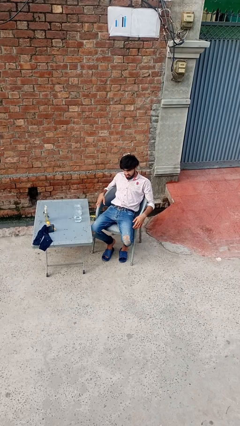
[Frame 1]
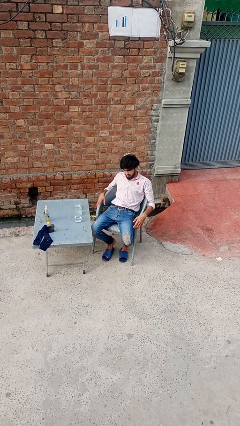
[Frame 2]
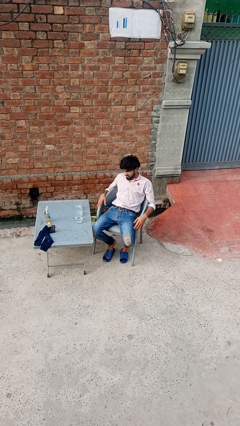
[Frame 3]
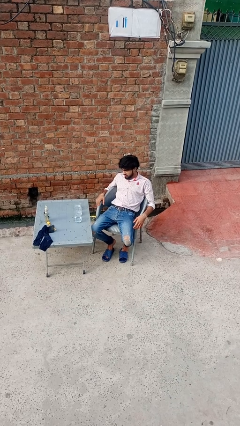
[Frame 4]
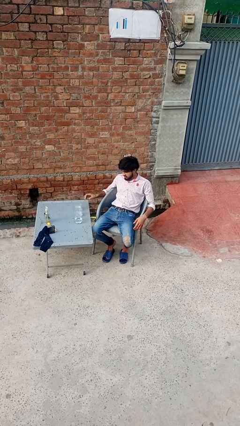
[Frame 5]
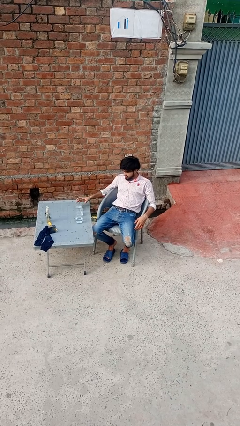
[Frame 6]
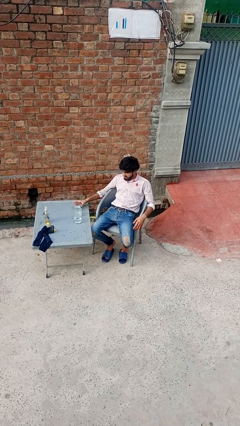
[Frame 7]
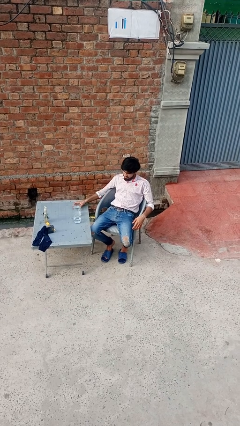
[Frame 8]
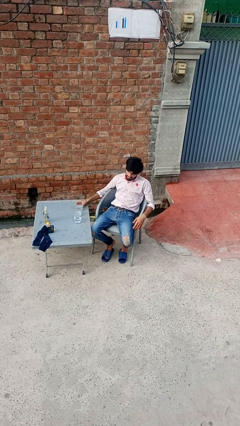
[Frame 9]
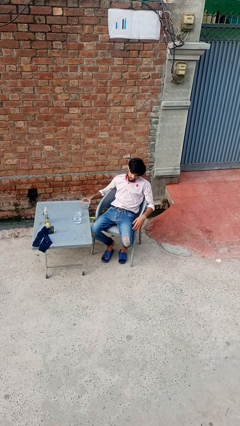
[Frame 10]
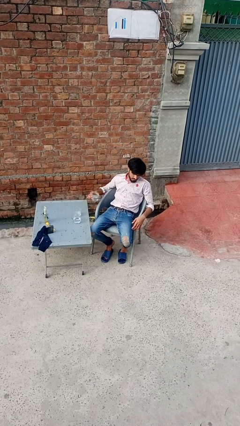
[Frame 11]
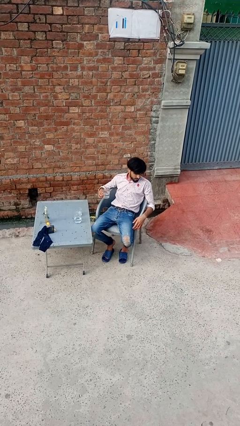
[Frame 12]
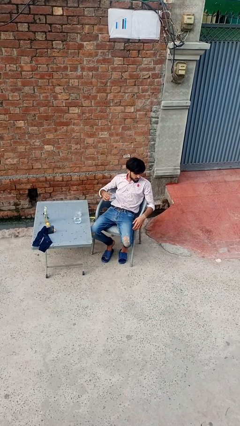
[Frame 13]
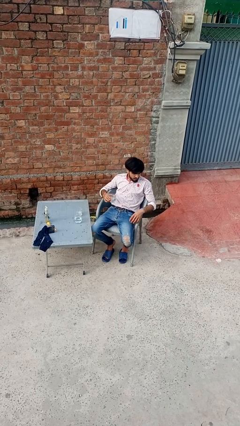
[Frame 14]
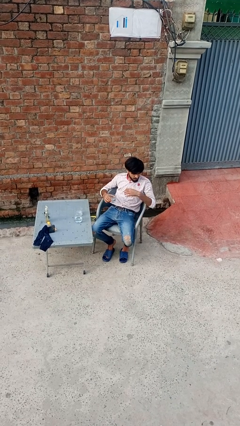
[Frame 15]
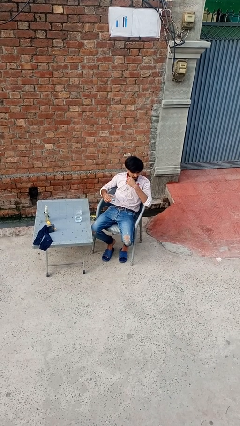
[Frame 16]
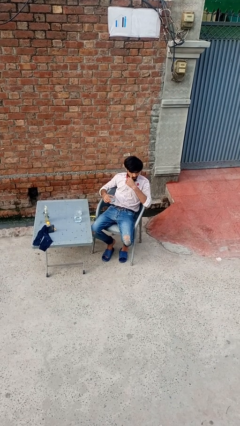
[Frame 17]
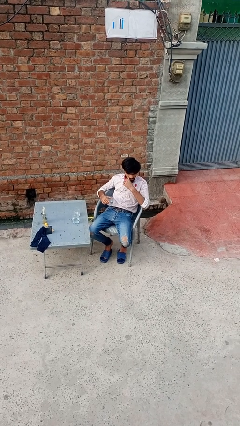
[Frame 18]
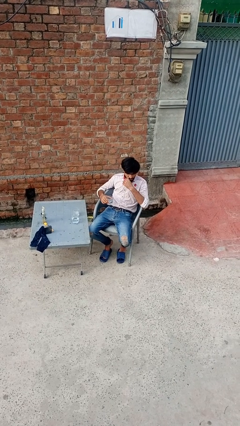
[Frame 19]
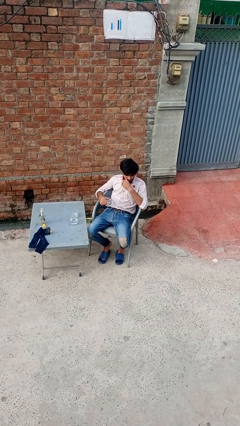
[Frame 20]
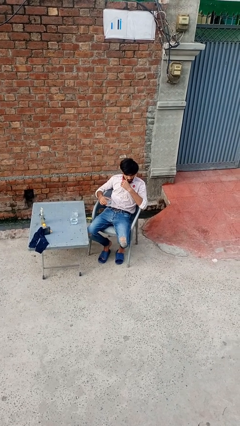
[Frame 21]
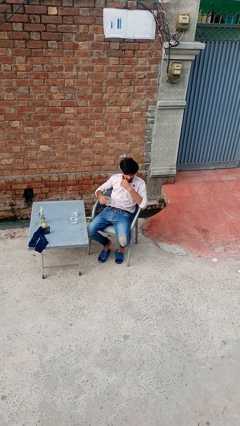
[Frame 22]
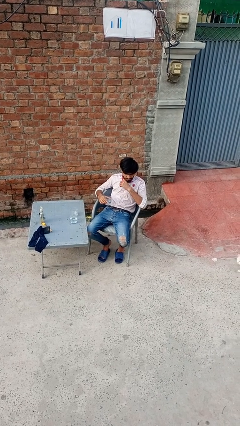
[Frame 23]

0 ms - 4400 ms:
person picks up object from table

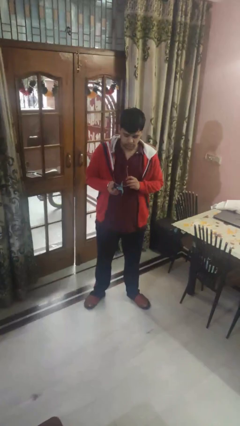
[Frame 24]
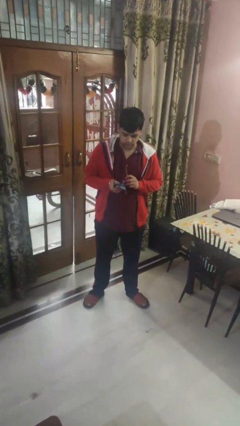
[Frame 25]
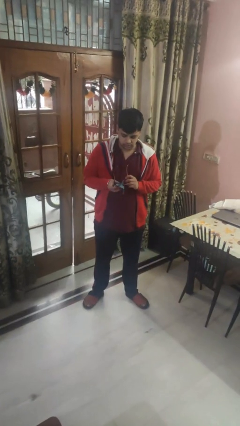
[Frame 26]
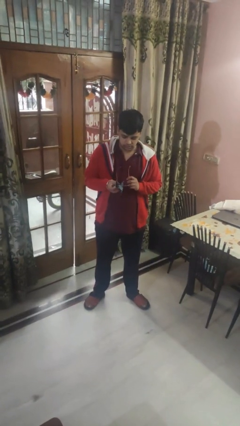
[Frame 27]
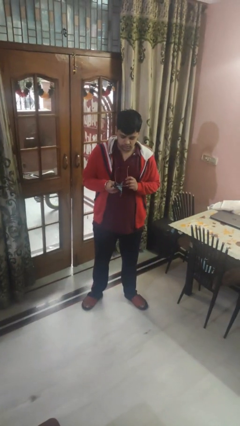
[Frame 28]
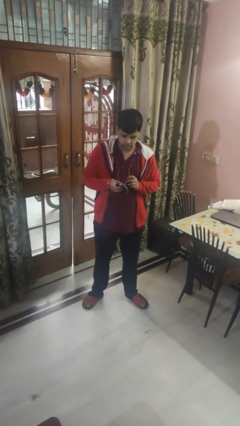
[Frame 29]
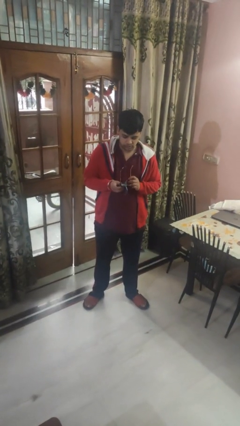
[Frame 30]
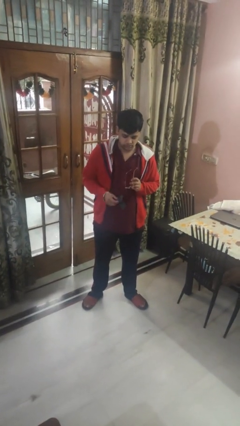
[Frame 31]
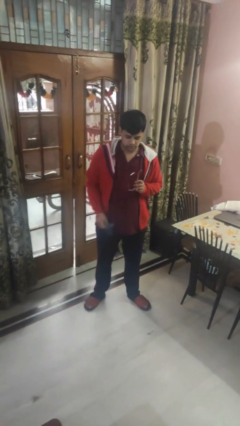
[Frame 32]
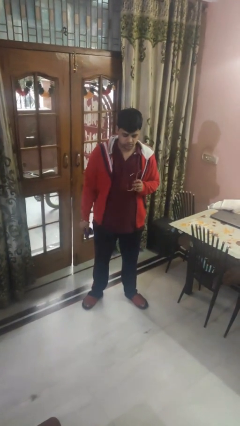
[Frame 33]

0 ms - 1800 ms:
person cleans eyeglasses

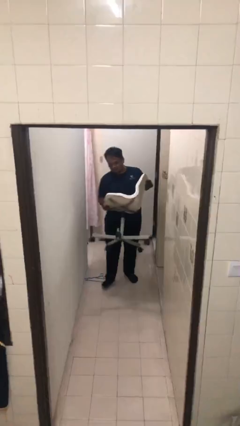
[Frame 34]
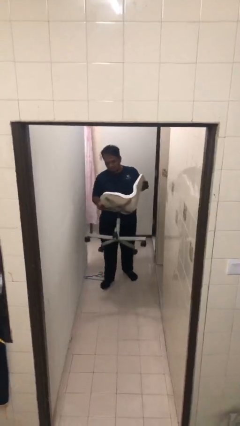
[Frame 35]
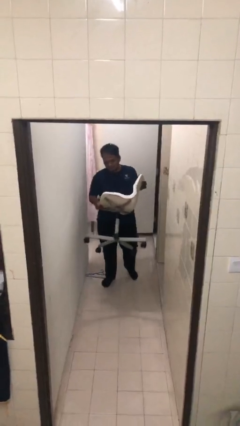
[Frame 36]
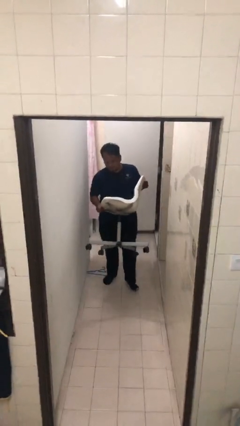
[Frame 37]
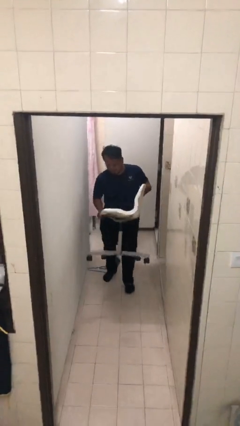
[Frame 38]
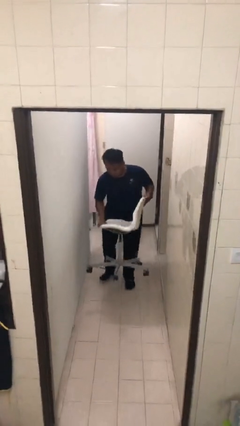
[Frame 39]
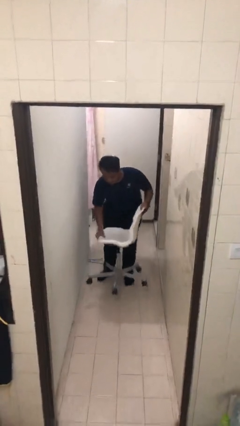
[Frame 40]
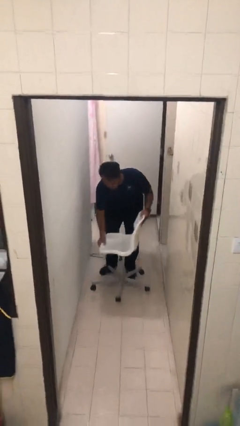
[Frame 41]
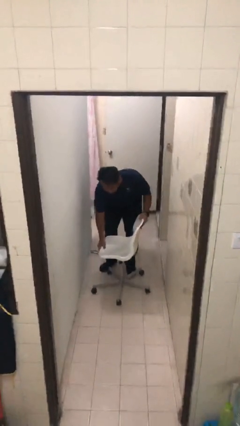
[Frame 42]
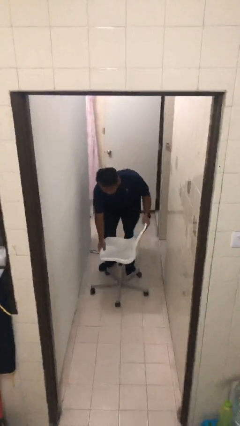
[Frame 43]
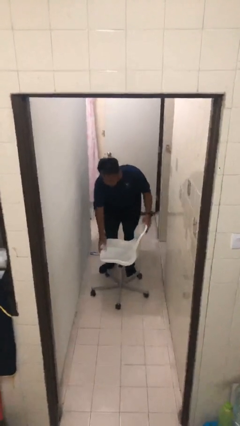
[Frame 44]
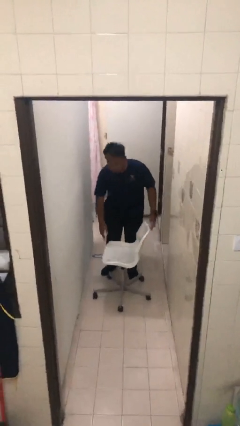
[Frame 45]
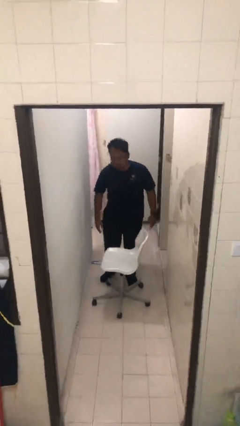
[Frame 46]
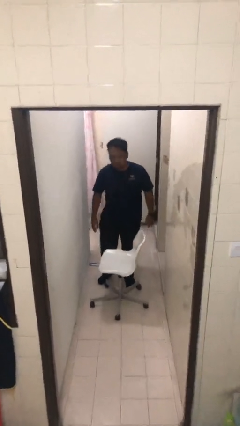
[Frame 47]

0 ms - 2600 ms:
person puts down object on floor

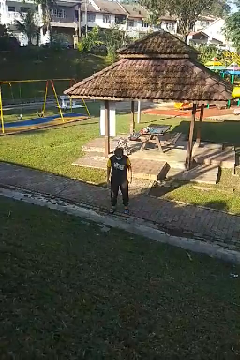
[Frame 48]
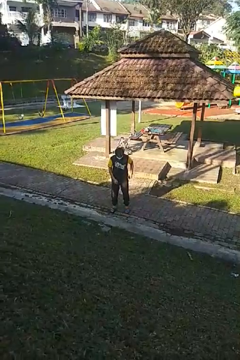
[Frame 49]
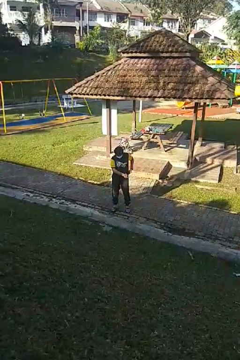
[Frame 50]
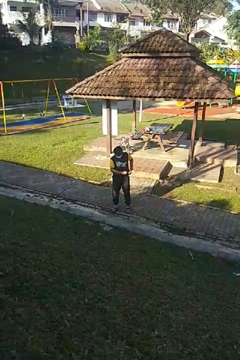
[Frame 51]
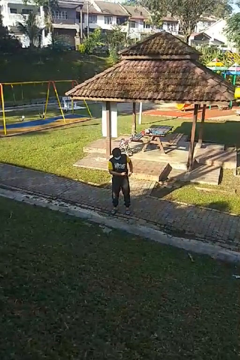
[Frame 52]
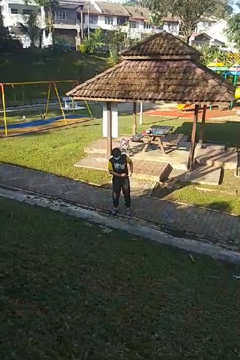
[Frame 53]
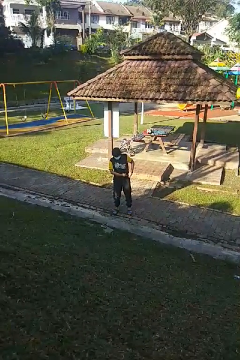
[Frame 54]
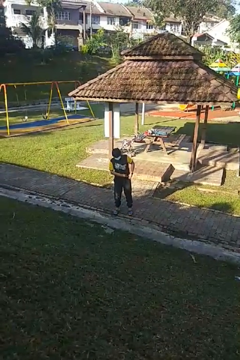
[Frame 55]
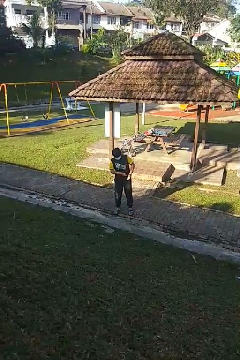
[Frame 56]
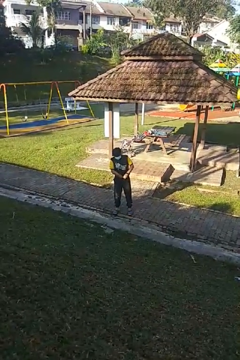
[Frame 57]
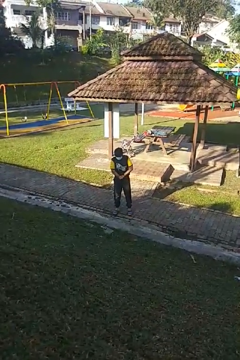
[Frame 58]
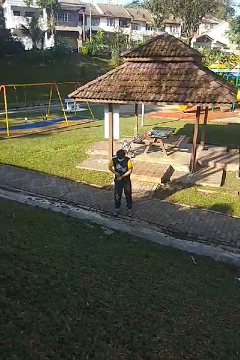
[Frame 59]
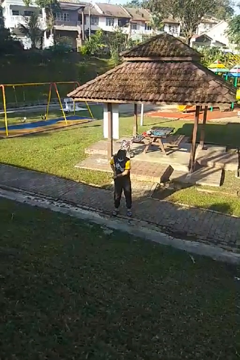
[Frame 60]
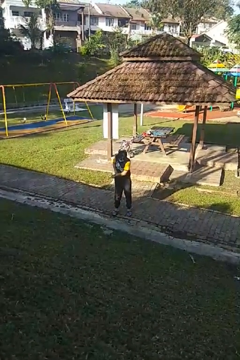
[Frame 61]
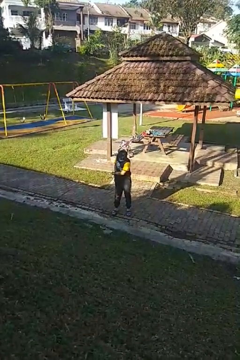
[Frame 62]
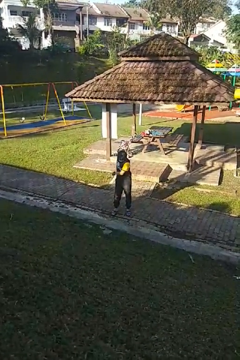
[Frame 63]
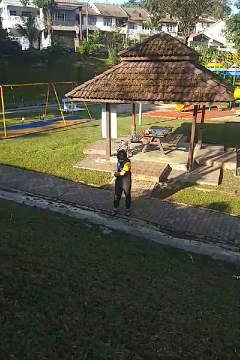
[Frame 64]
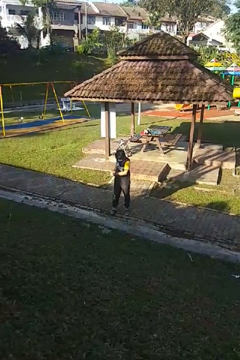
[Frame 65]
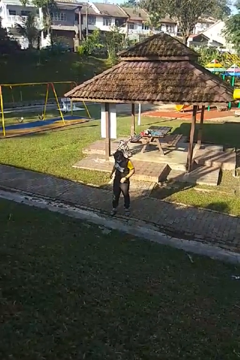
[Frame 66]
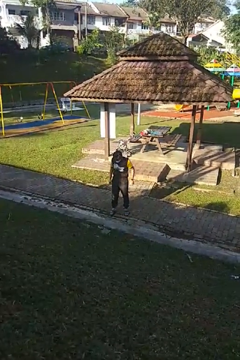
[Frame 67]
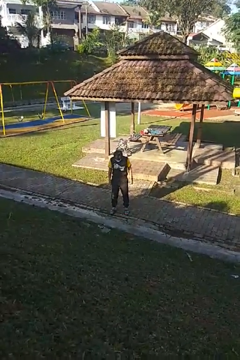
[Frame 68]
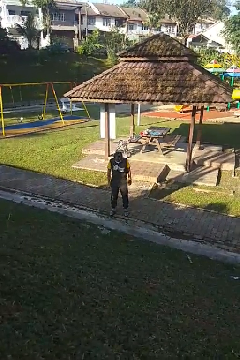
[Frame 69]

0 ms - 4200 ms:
person tucks in shirt

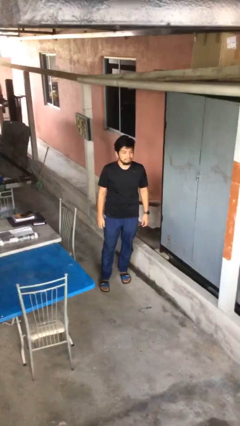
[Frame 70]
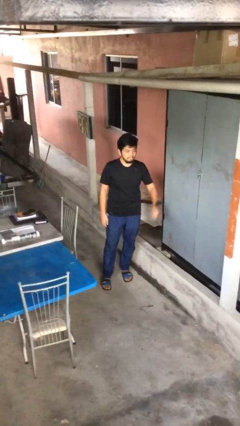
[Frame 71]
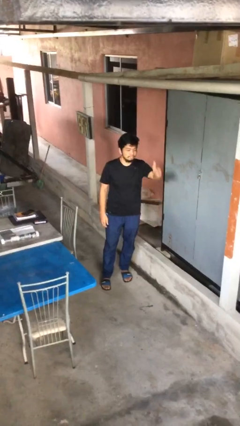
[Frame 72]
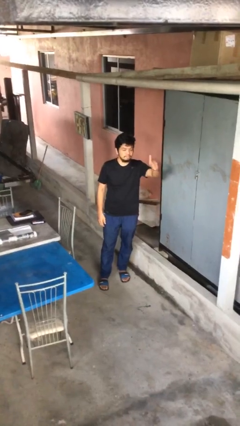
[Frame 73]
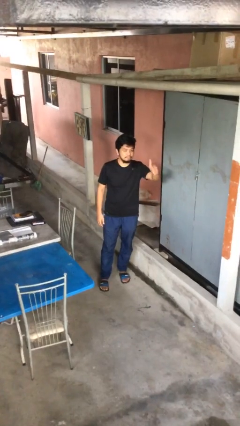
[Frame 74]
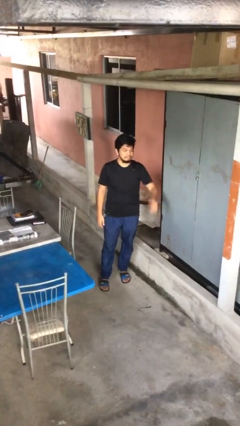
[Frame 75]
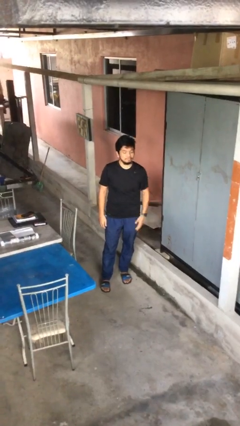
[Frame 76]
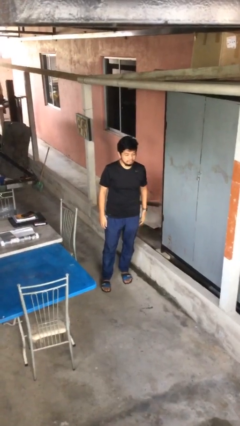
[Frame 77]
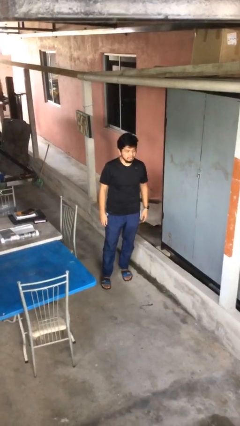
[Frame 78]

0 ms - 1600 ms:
person gestures thumbs up

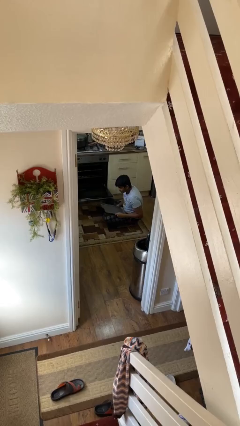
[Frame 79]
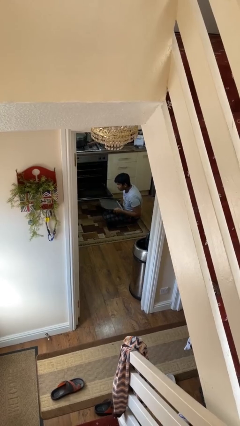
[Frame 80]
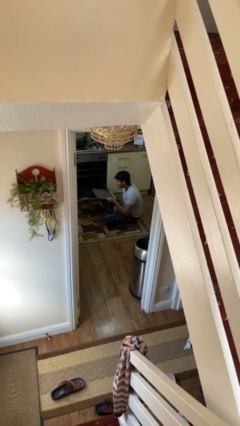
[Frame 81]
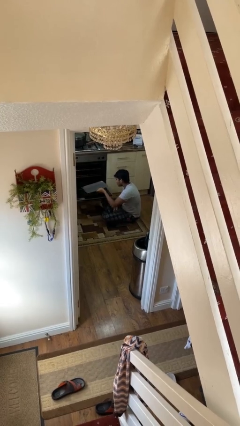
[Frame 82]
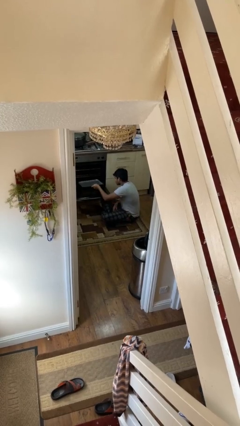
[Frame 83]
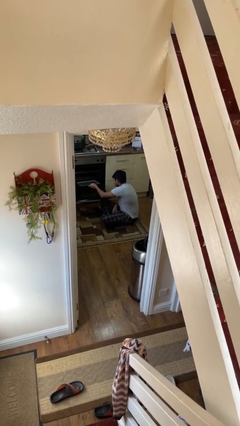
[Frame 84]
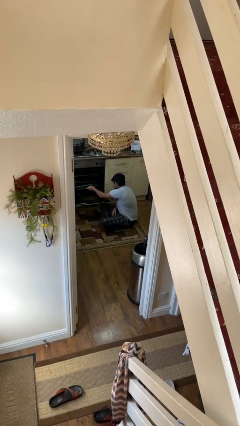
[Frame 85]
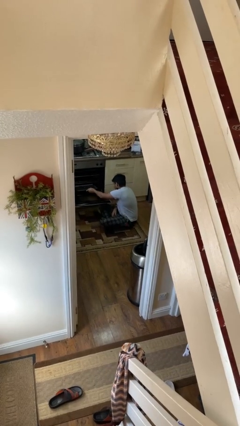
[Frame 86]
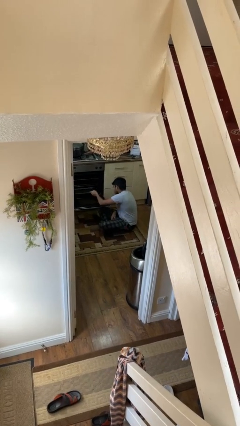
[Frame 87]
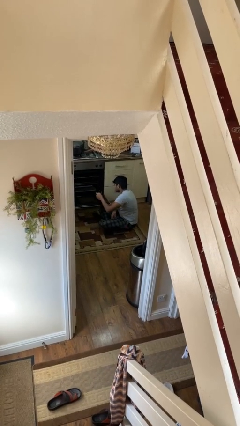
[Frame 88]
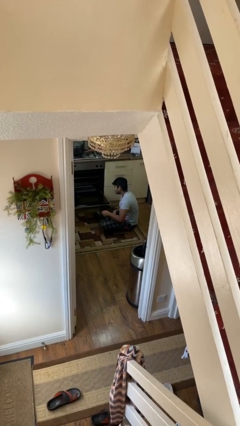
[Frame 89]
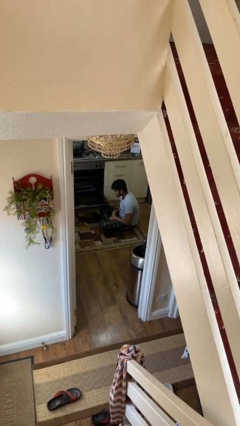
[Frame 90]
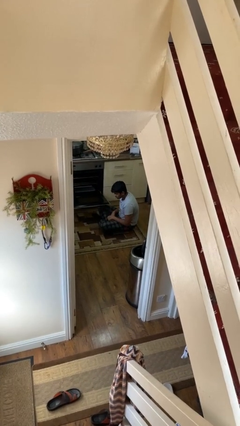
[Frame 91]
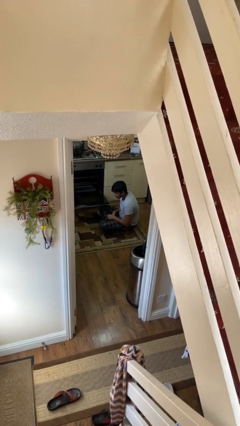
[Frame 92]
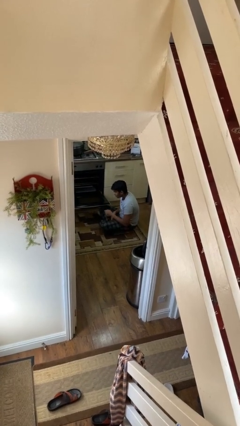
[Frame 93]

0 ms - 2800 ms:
person puts object into oven

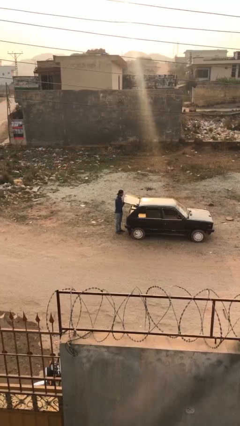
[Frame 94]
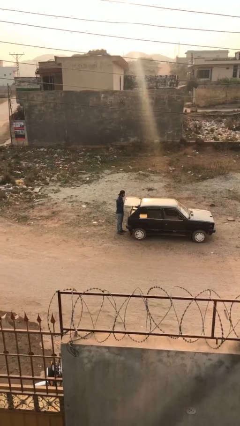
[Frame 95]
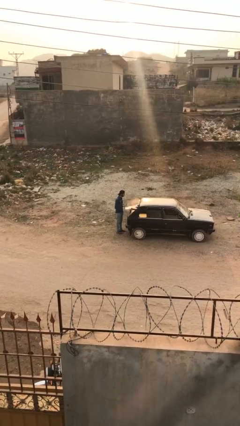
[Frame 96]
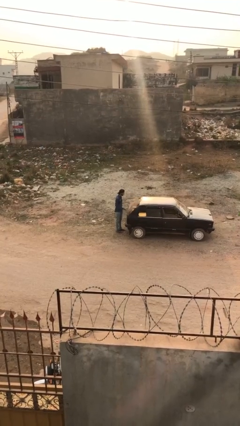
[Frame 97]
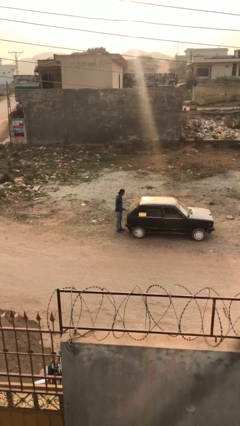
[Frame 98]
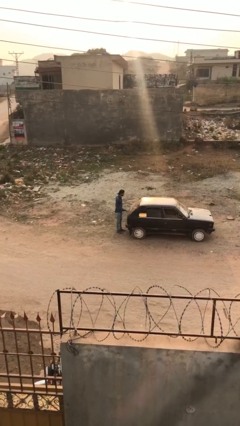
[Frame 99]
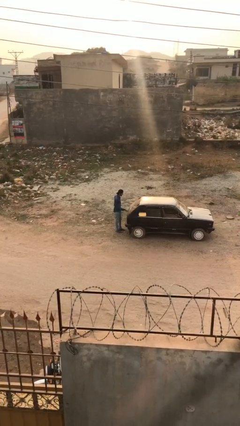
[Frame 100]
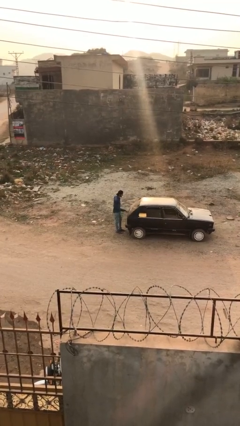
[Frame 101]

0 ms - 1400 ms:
person closes car trunk
